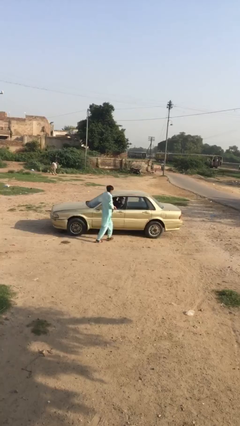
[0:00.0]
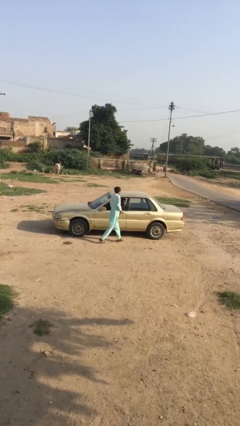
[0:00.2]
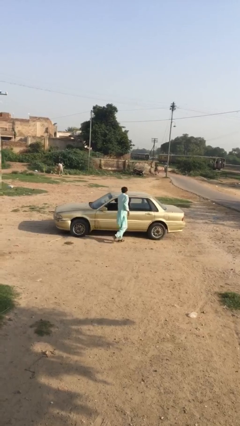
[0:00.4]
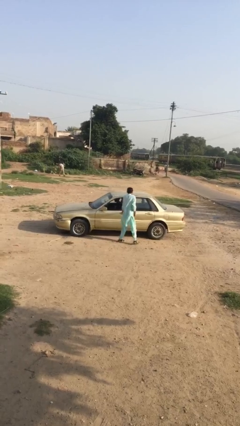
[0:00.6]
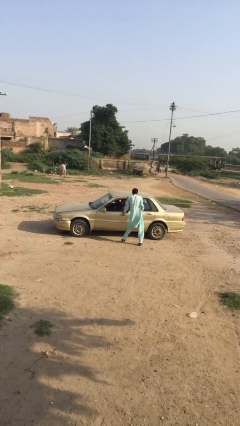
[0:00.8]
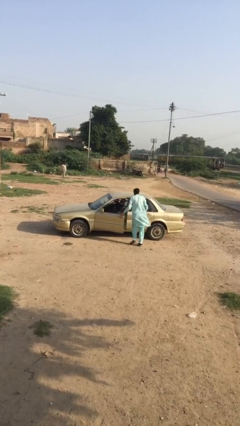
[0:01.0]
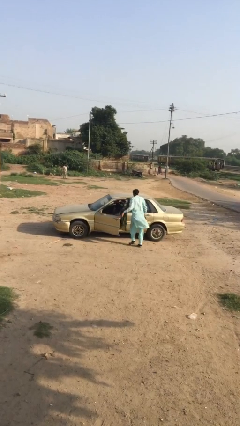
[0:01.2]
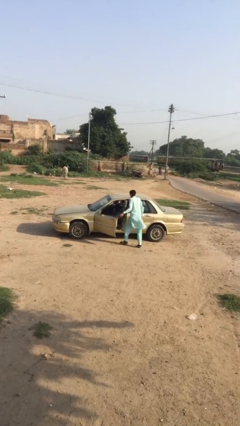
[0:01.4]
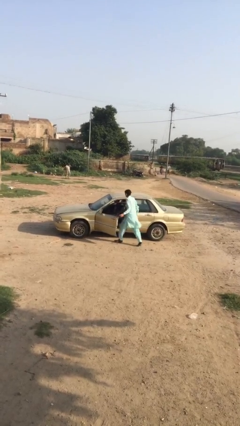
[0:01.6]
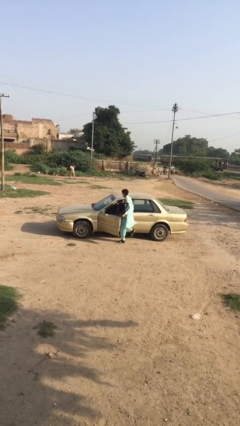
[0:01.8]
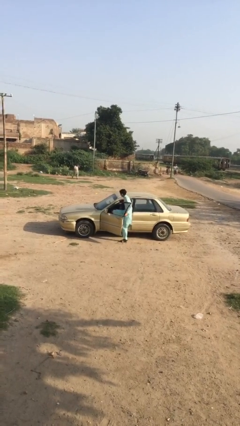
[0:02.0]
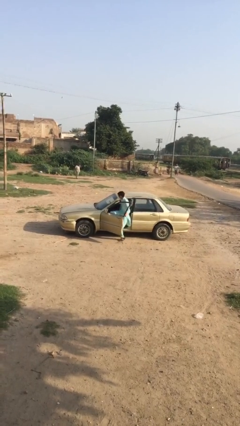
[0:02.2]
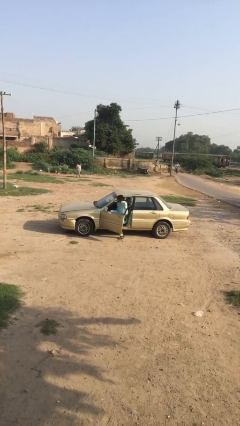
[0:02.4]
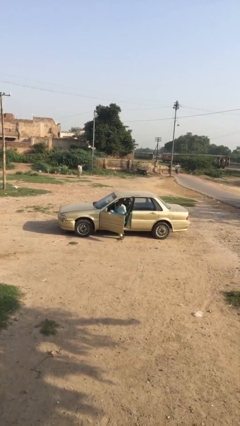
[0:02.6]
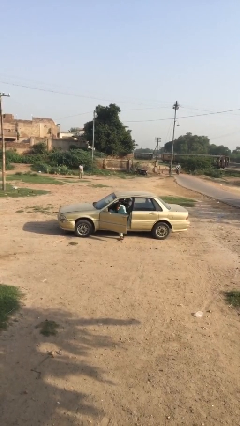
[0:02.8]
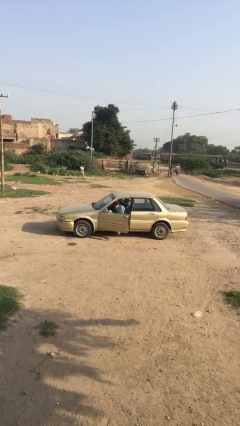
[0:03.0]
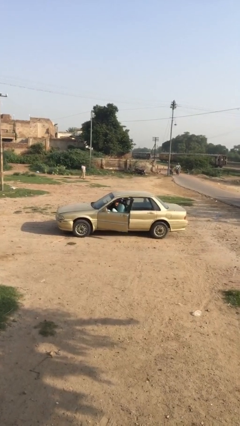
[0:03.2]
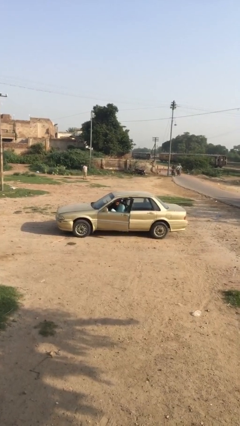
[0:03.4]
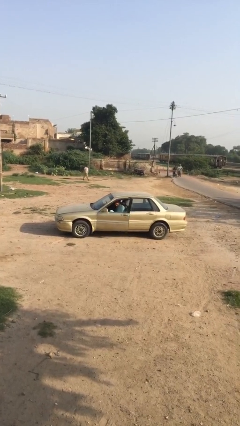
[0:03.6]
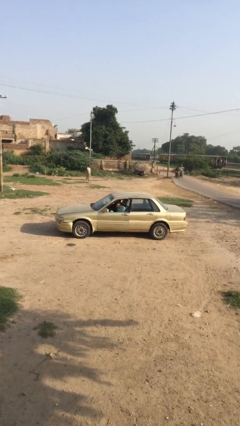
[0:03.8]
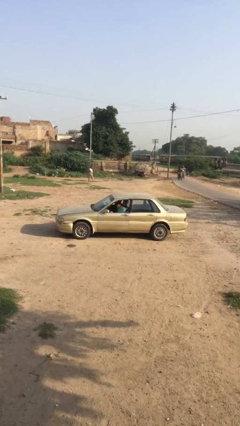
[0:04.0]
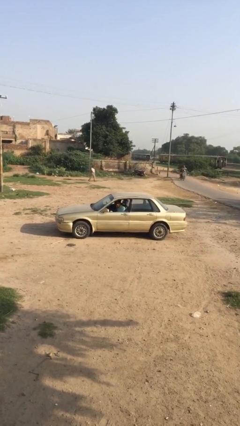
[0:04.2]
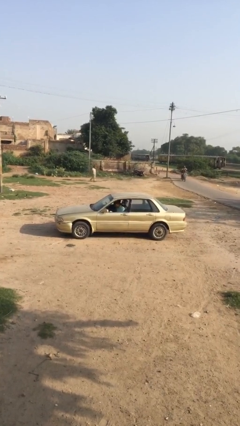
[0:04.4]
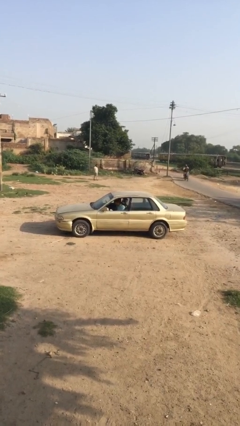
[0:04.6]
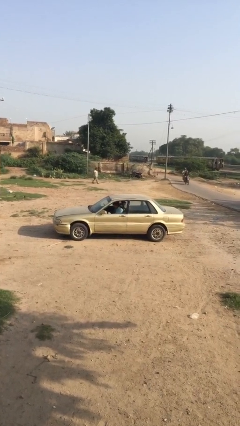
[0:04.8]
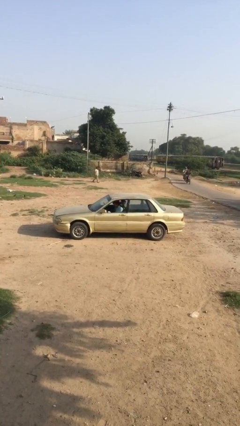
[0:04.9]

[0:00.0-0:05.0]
car picks up person

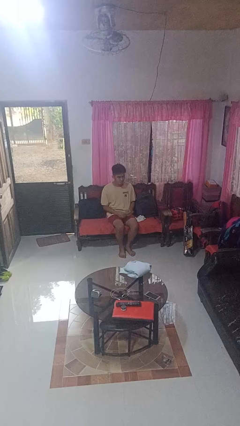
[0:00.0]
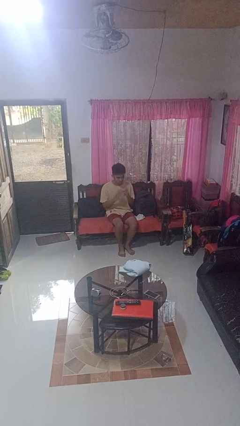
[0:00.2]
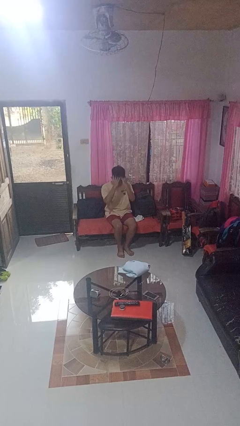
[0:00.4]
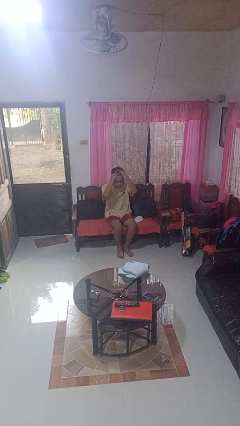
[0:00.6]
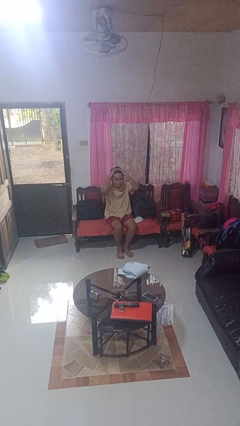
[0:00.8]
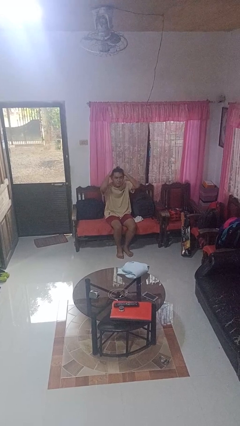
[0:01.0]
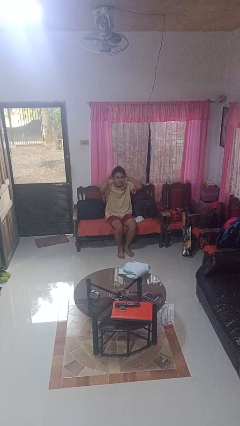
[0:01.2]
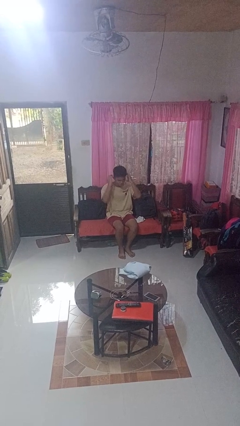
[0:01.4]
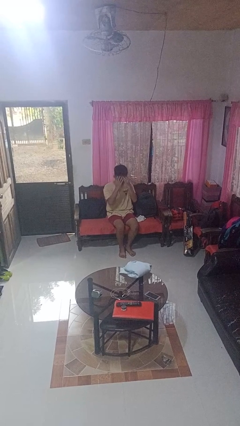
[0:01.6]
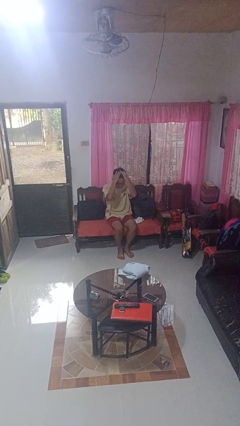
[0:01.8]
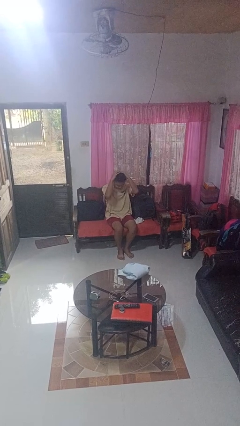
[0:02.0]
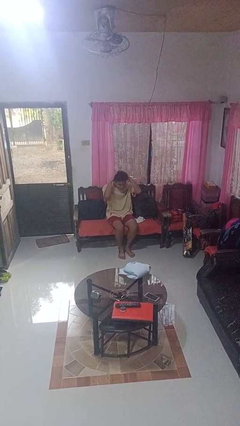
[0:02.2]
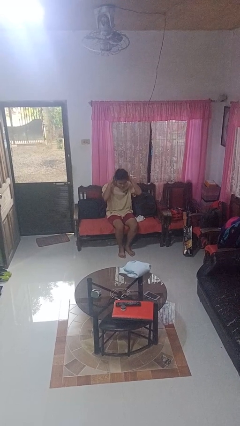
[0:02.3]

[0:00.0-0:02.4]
person strokes hair

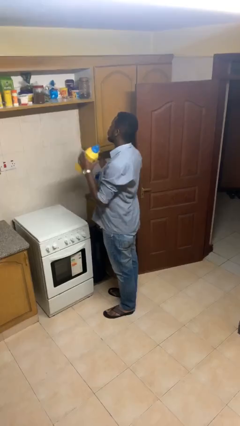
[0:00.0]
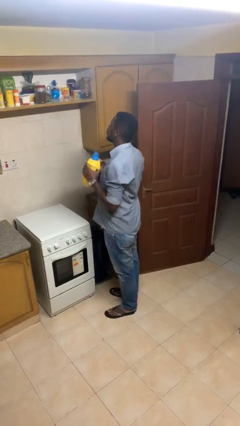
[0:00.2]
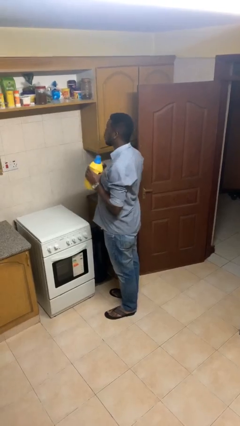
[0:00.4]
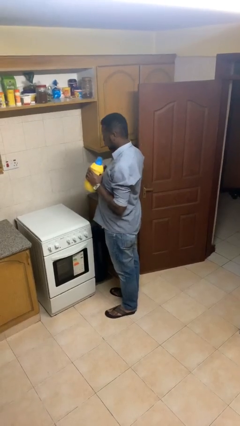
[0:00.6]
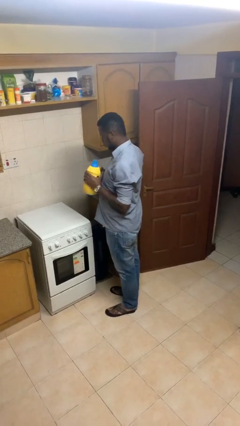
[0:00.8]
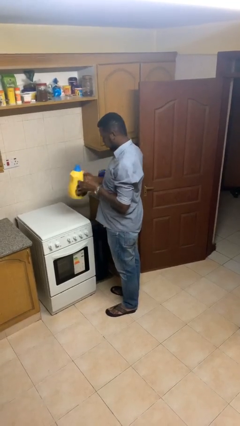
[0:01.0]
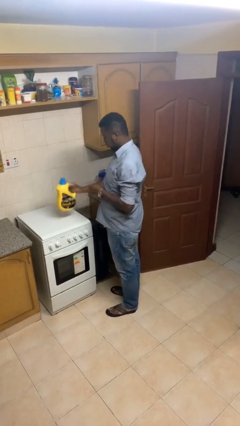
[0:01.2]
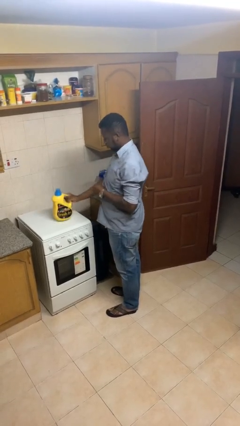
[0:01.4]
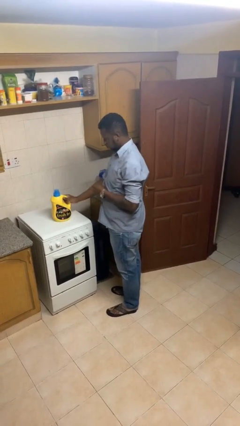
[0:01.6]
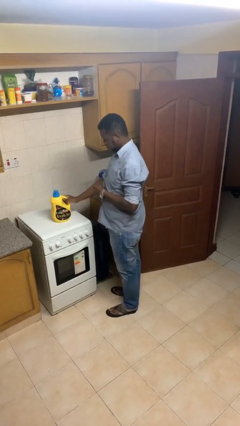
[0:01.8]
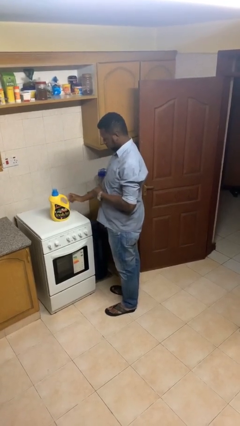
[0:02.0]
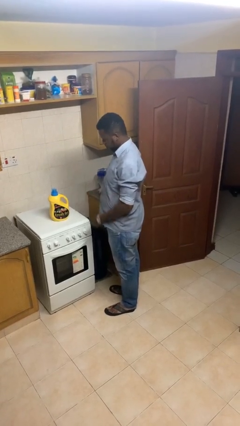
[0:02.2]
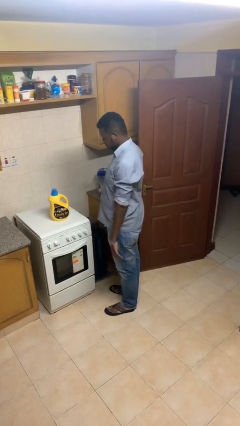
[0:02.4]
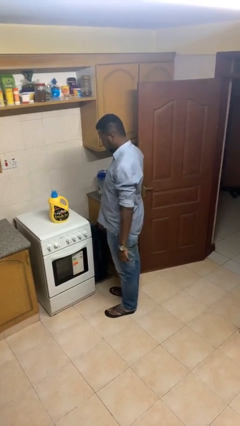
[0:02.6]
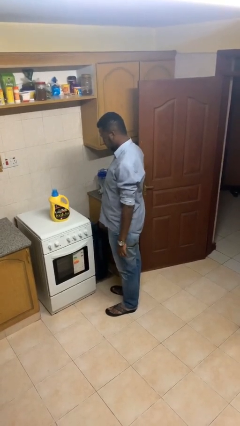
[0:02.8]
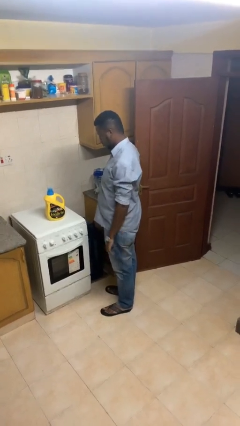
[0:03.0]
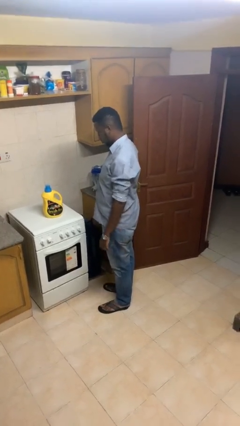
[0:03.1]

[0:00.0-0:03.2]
person puts down object on table

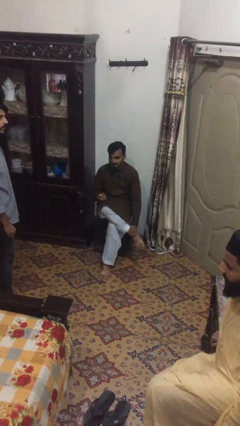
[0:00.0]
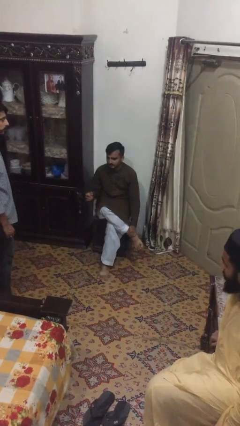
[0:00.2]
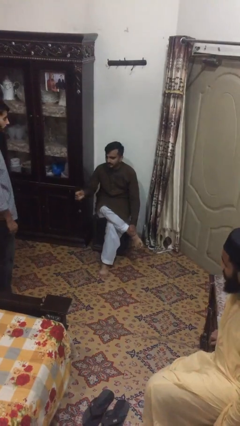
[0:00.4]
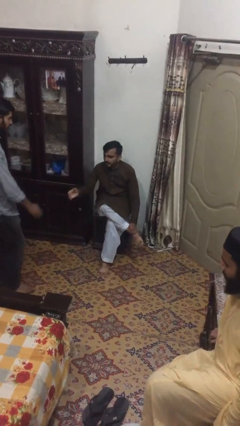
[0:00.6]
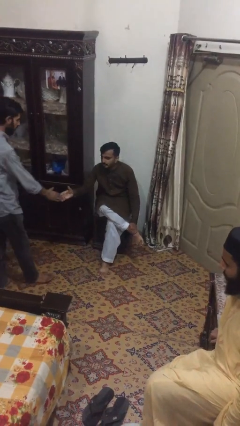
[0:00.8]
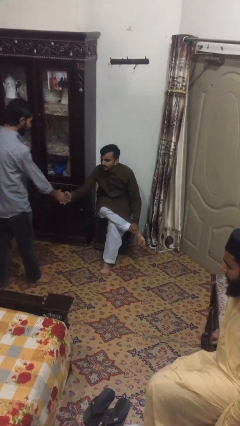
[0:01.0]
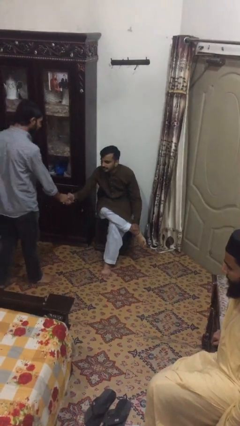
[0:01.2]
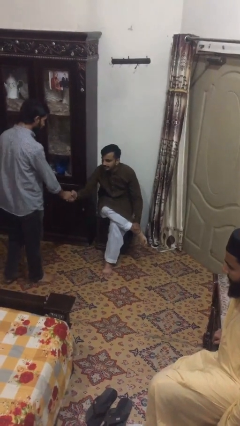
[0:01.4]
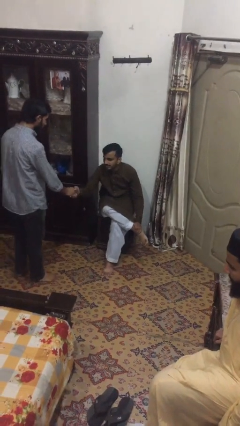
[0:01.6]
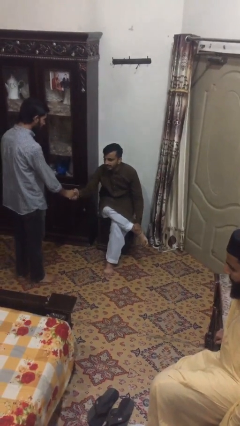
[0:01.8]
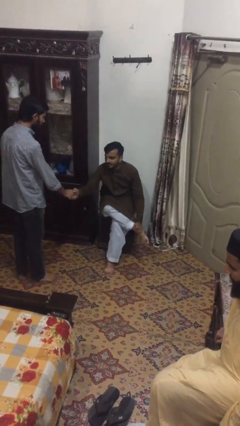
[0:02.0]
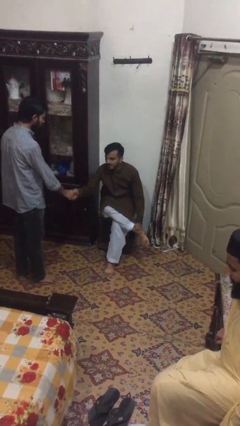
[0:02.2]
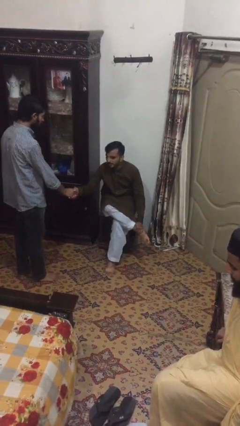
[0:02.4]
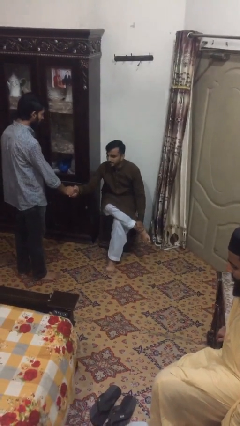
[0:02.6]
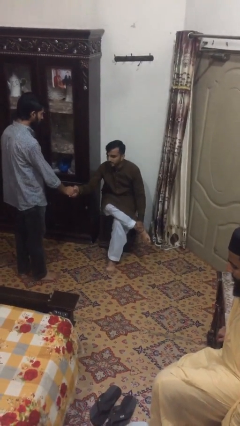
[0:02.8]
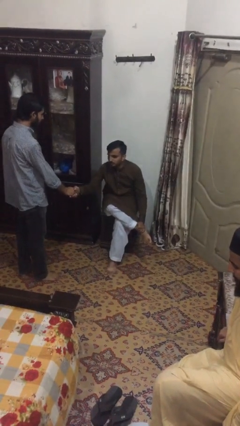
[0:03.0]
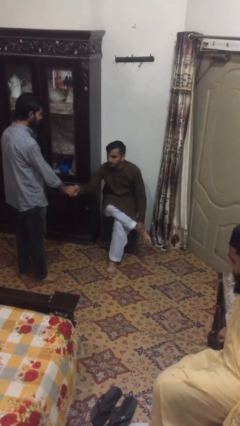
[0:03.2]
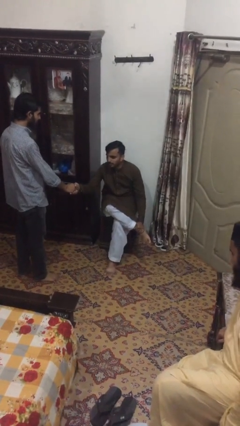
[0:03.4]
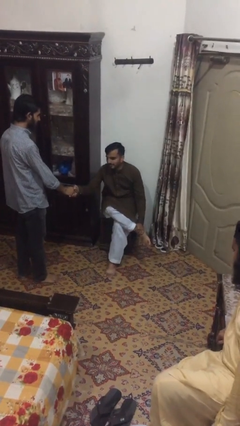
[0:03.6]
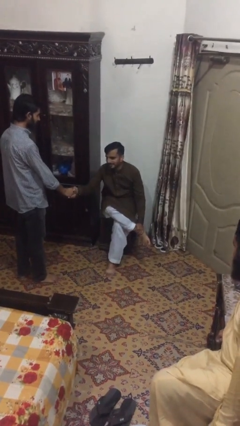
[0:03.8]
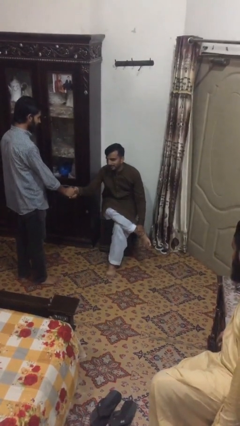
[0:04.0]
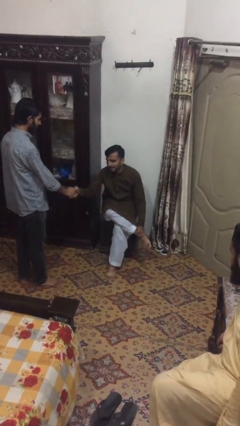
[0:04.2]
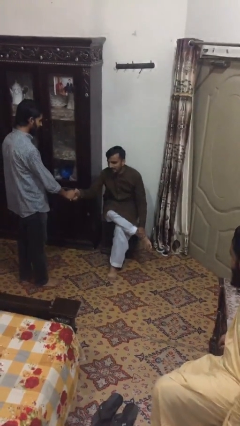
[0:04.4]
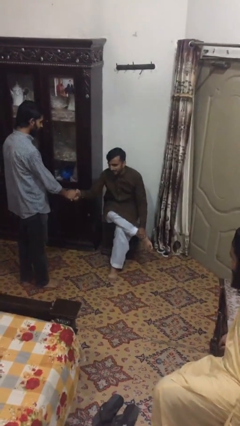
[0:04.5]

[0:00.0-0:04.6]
person shakes hand

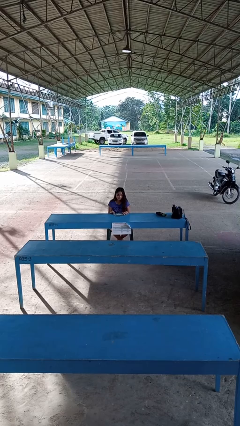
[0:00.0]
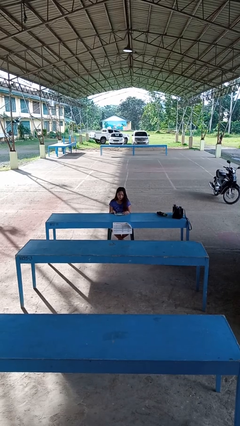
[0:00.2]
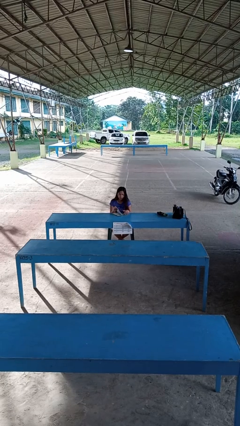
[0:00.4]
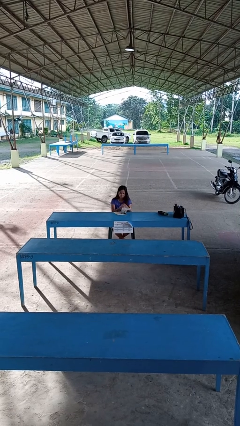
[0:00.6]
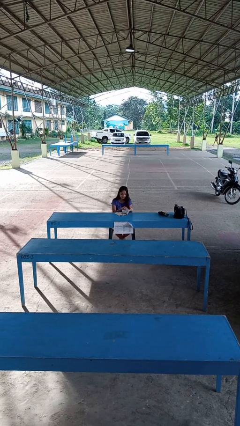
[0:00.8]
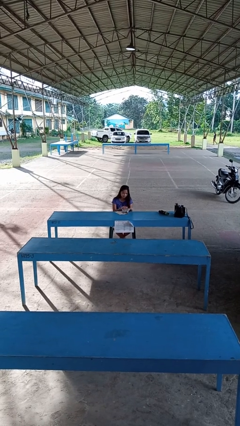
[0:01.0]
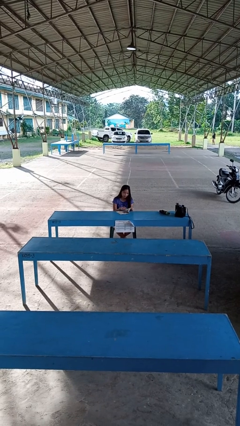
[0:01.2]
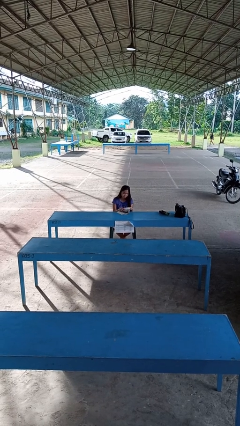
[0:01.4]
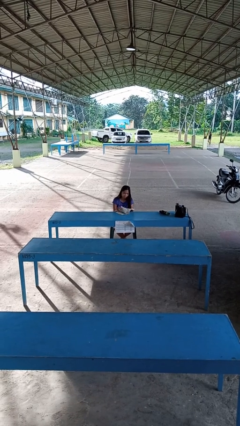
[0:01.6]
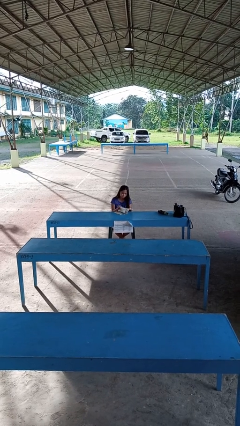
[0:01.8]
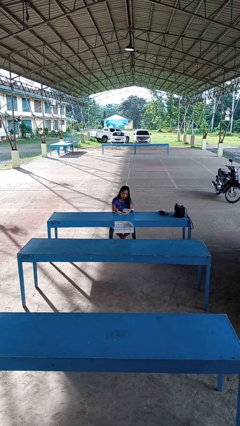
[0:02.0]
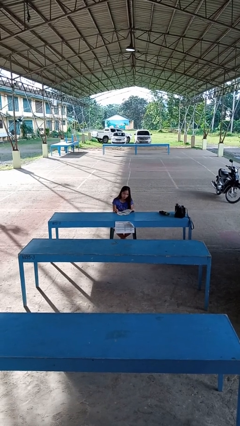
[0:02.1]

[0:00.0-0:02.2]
person reads magazine

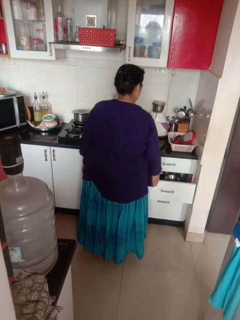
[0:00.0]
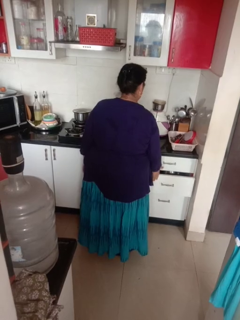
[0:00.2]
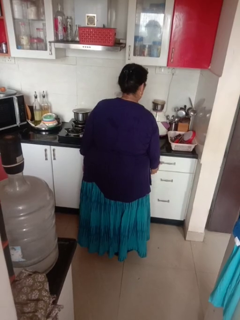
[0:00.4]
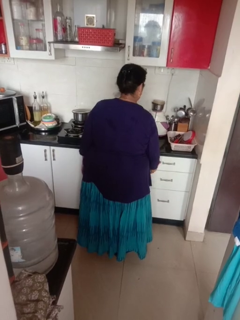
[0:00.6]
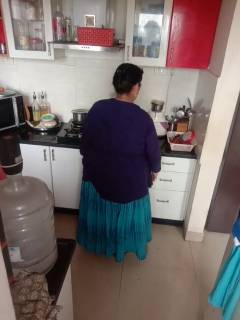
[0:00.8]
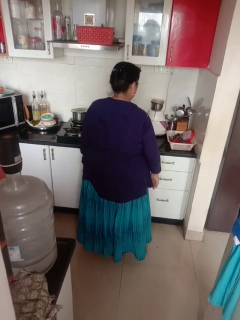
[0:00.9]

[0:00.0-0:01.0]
person closes kitchen drawer
